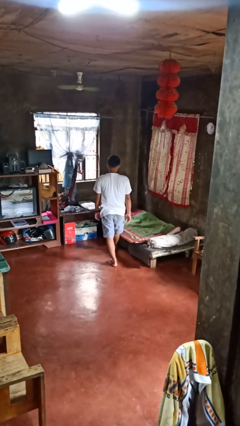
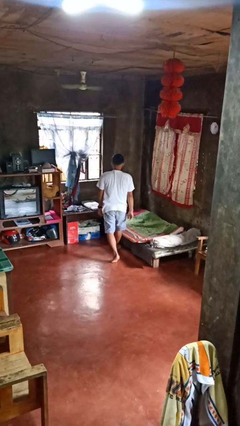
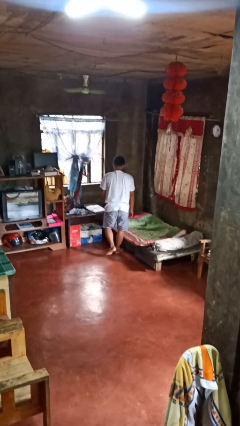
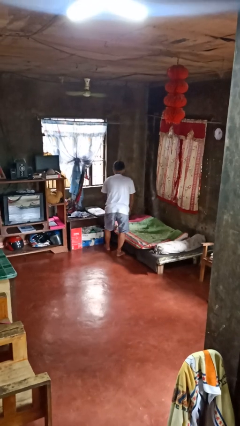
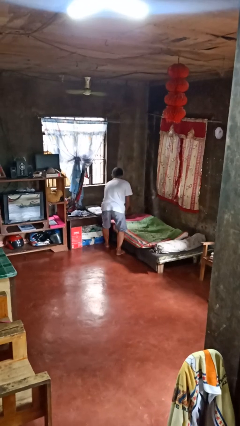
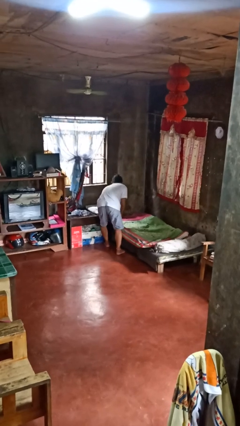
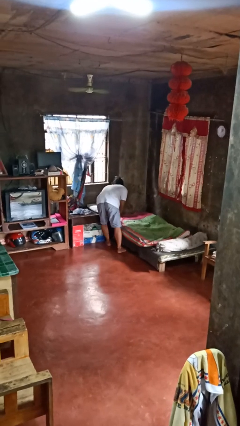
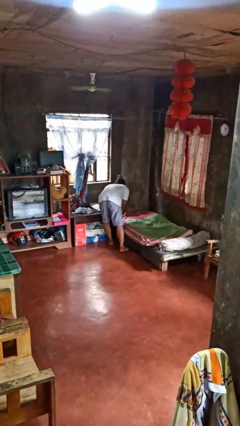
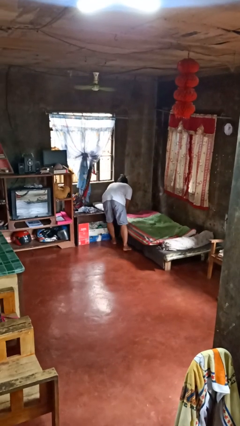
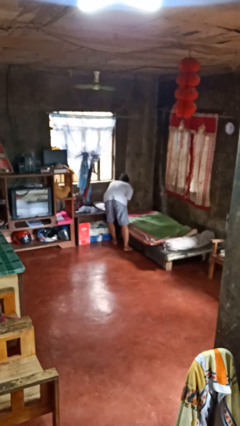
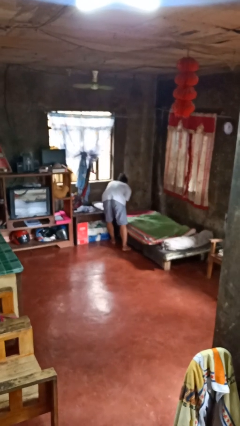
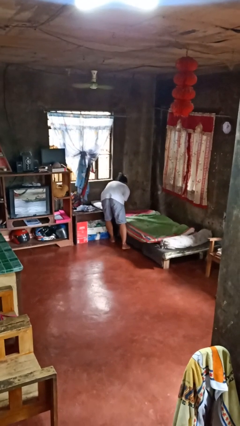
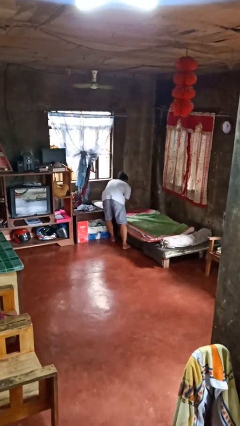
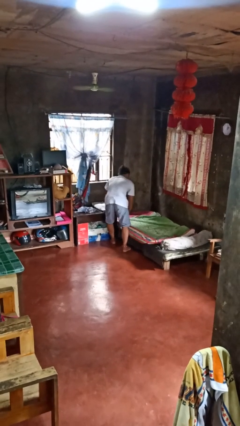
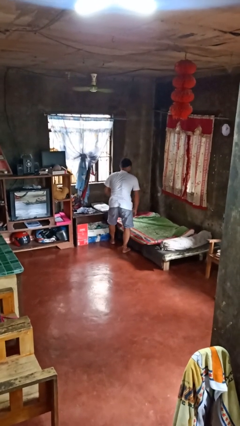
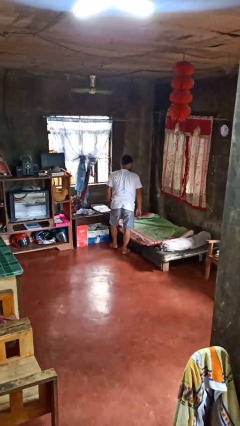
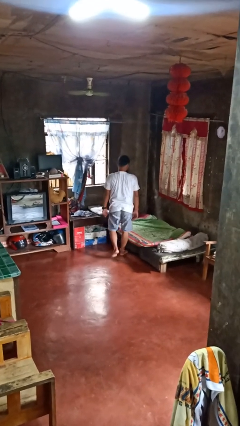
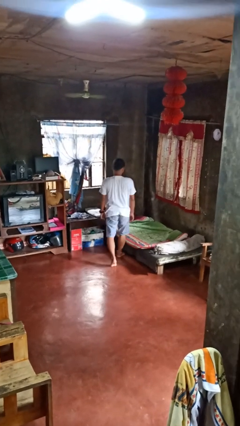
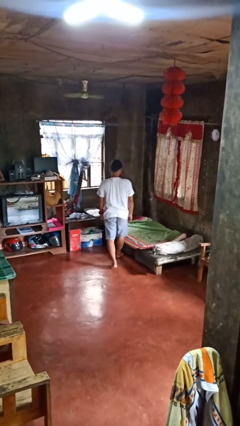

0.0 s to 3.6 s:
person makes bed

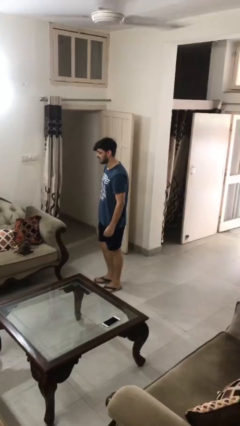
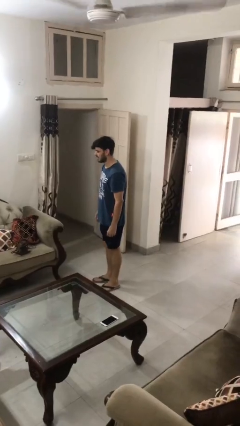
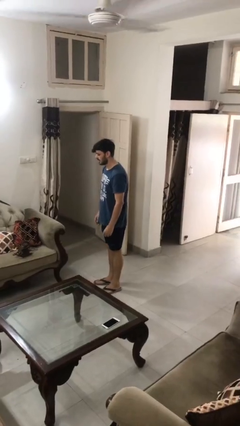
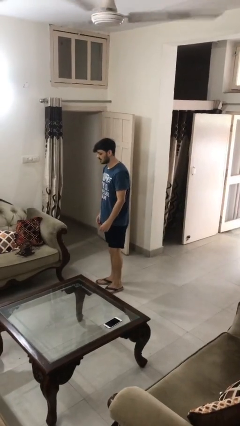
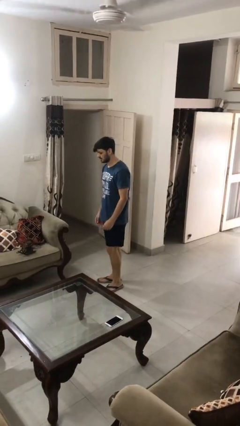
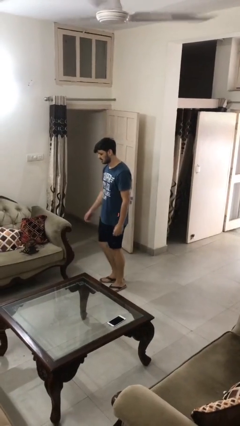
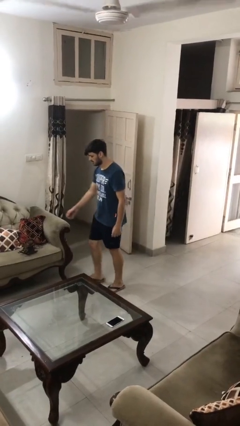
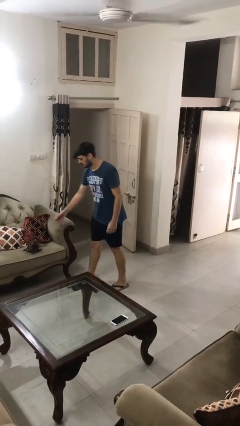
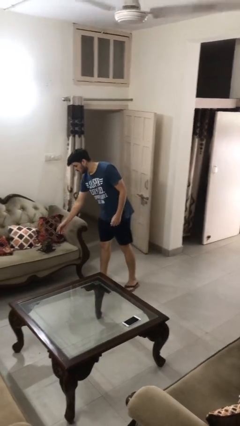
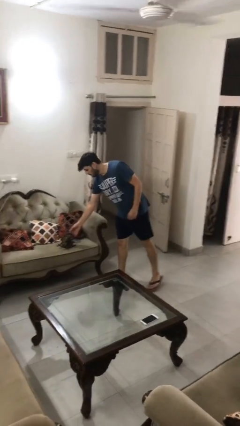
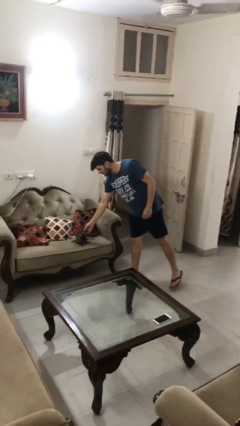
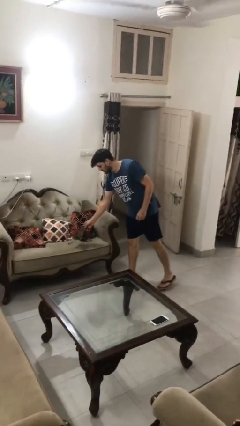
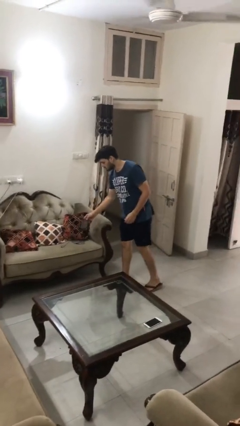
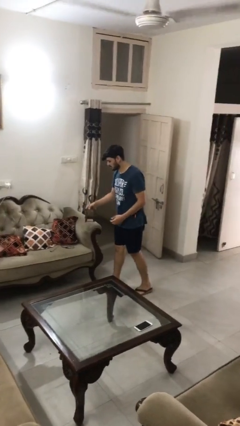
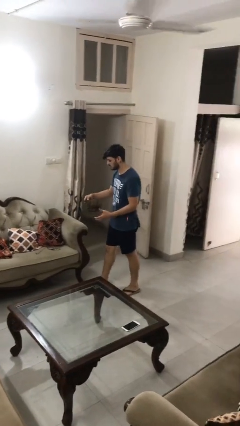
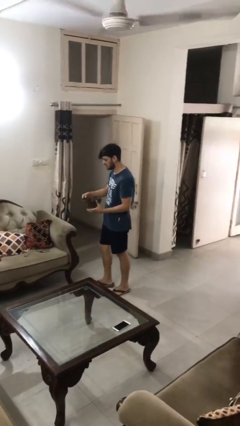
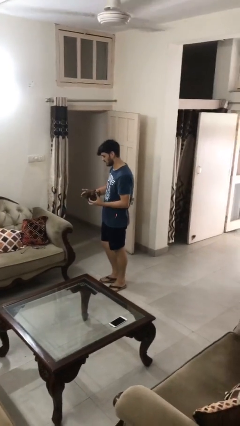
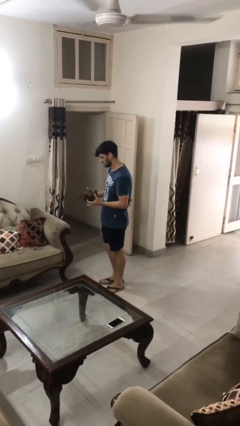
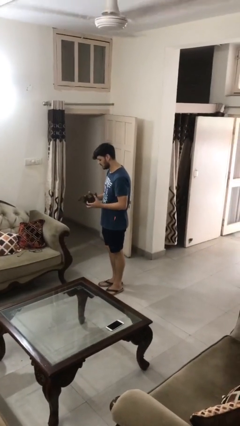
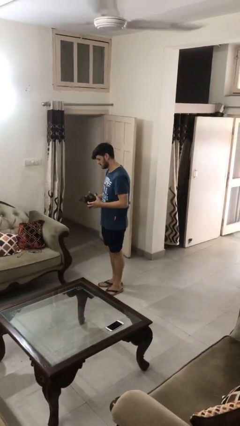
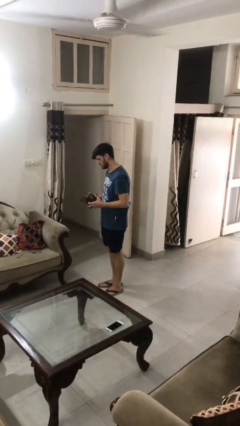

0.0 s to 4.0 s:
person picks up object from couch

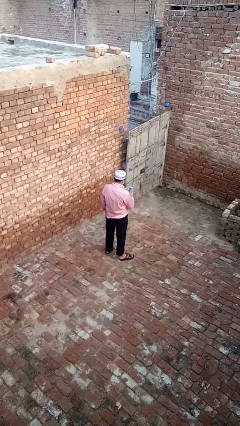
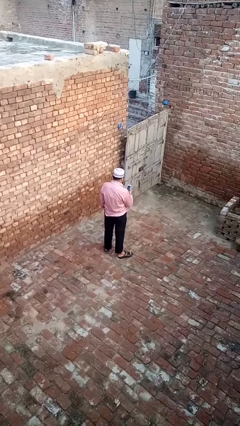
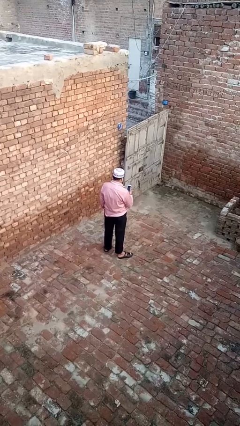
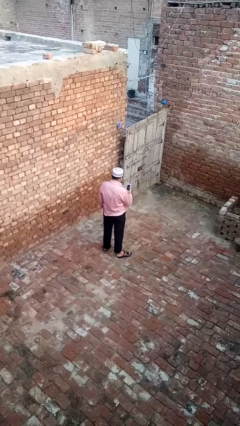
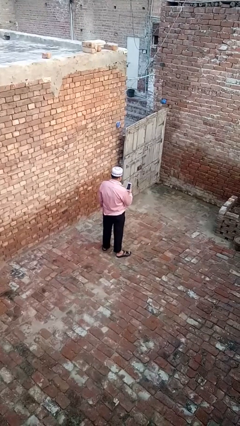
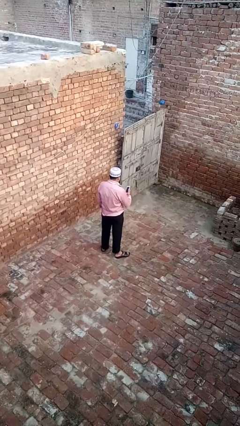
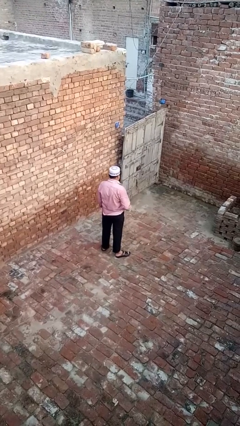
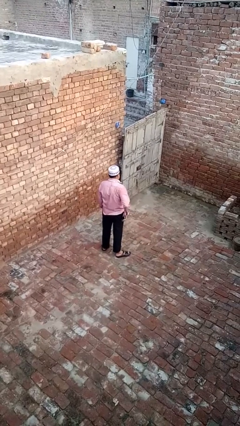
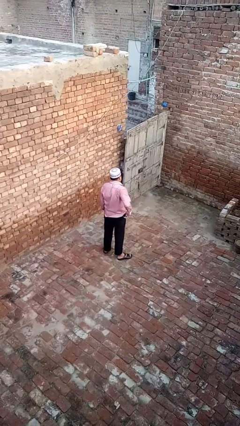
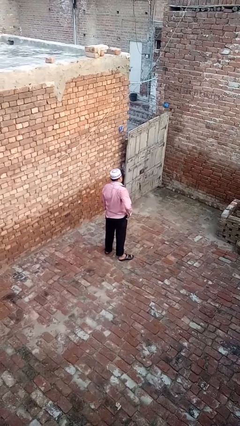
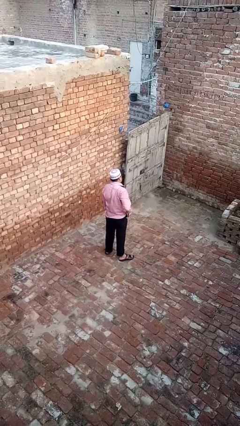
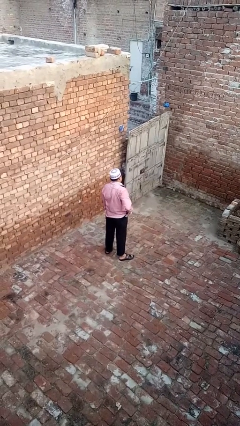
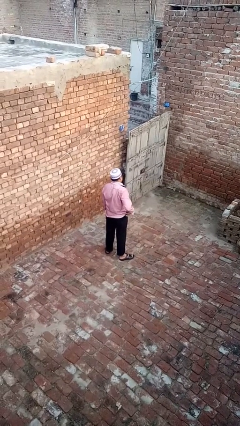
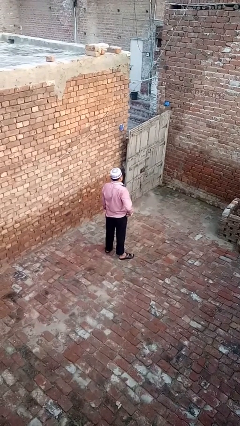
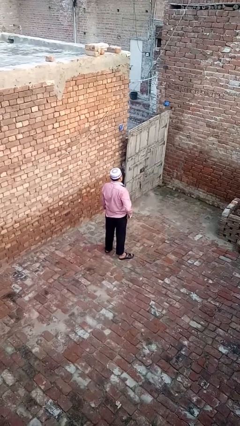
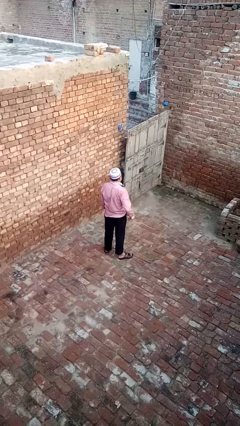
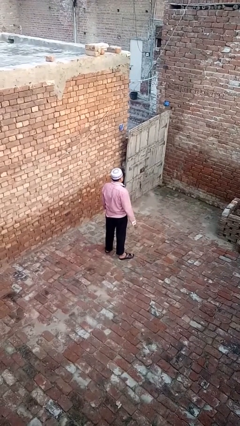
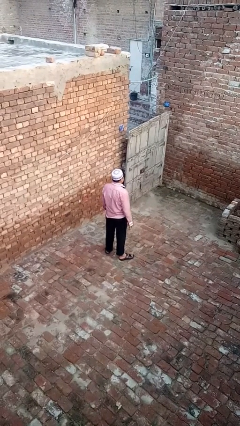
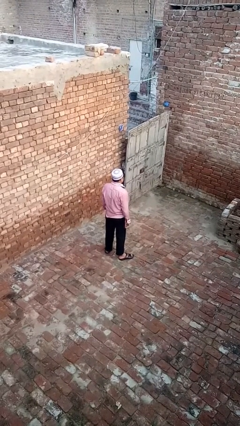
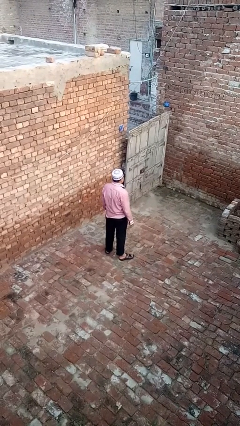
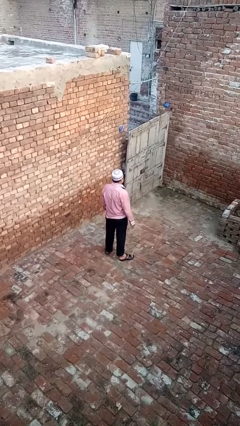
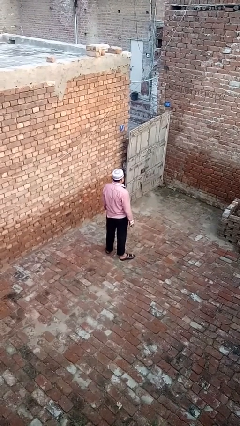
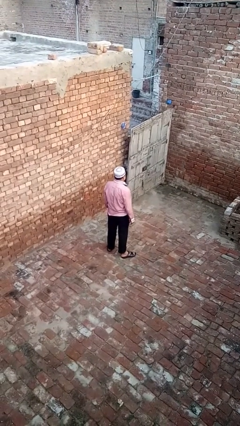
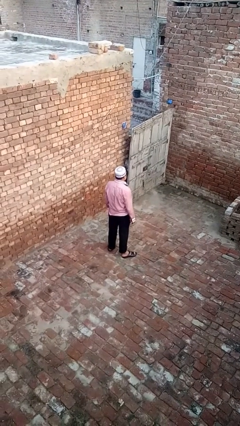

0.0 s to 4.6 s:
person puts phone into pocket

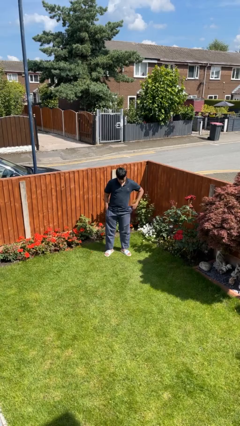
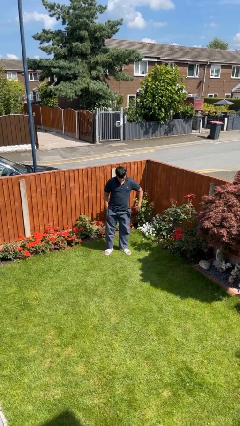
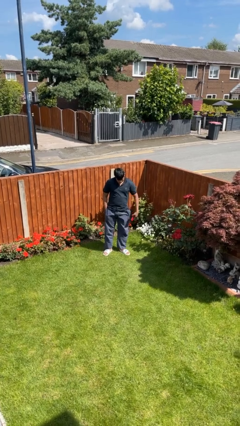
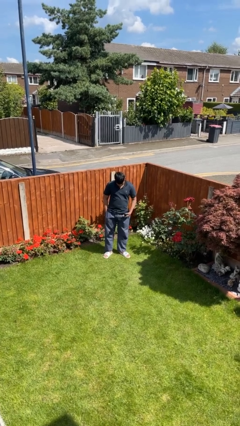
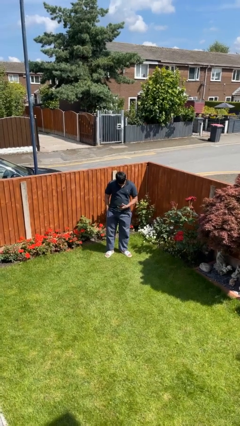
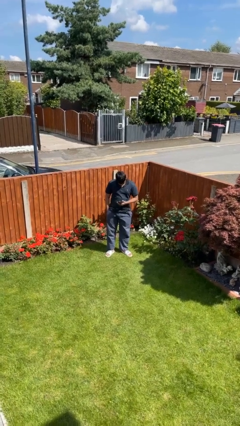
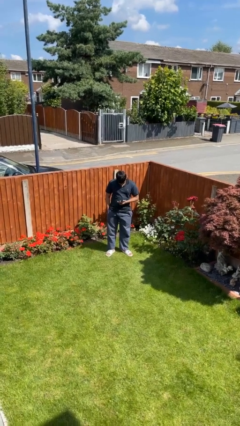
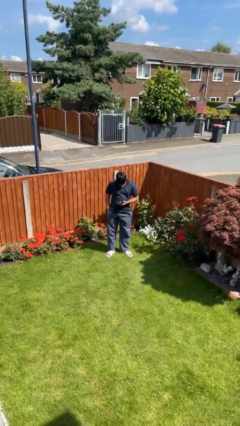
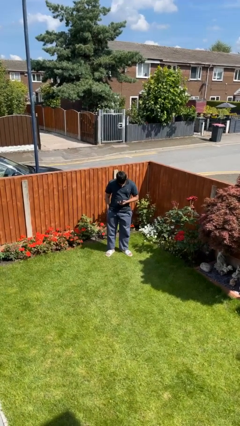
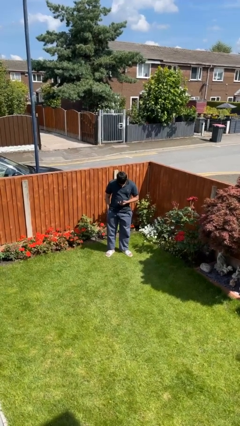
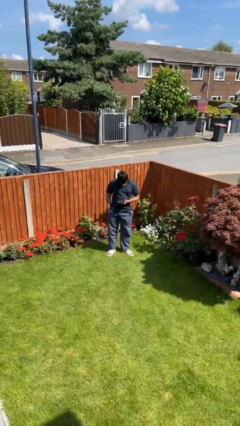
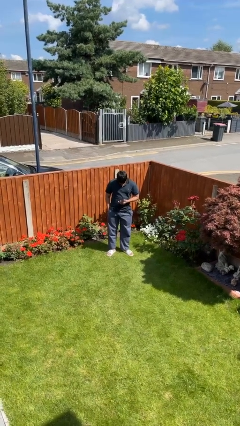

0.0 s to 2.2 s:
person takes phone from pocket

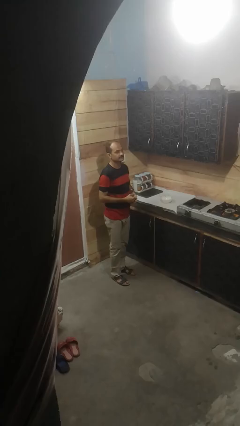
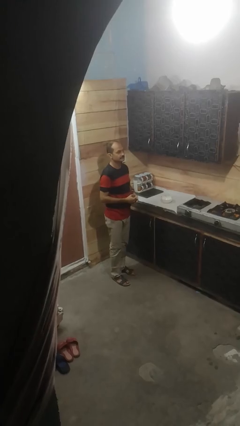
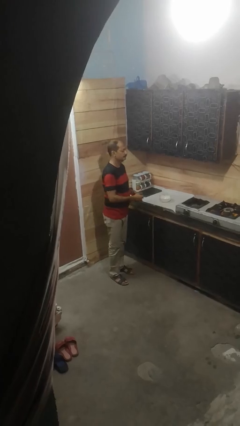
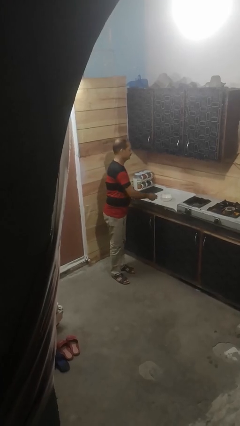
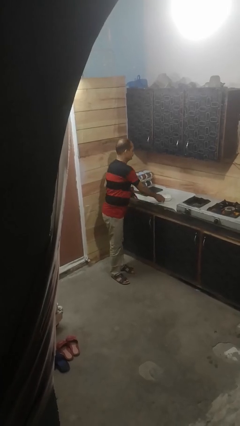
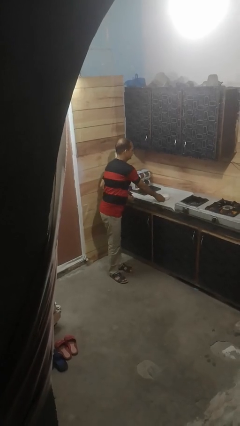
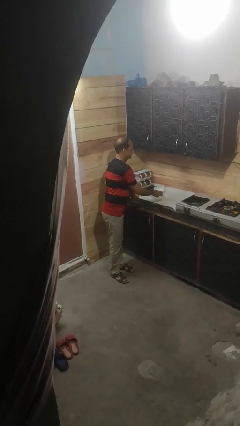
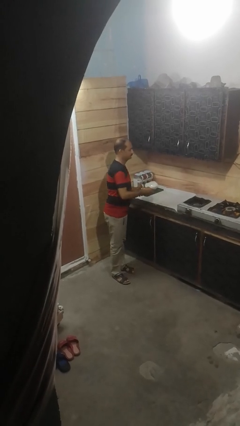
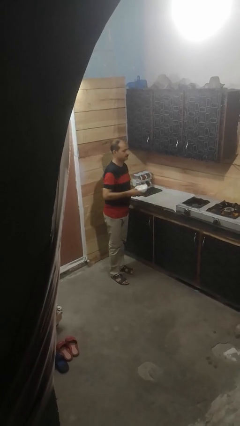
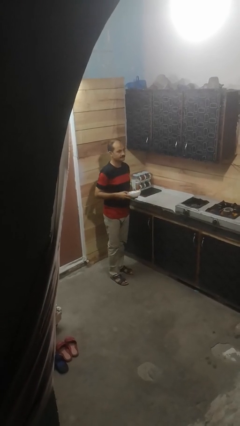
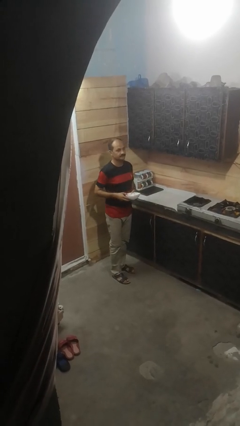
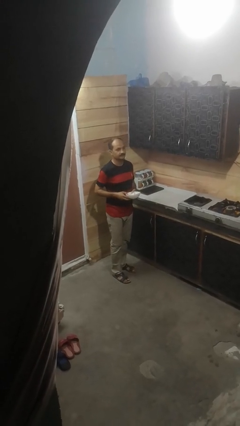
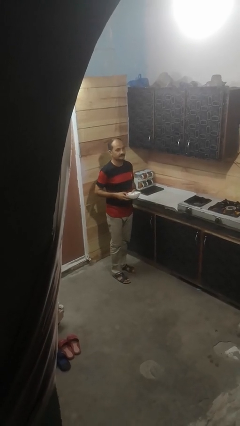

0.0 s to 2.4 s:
person picks up object from countertop

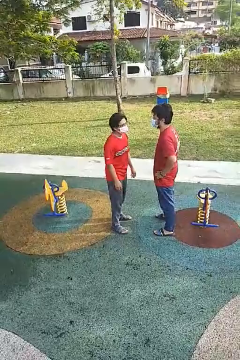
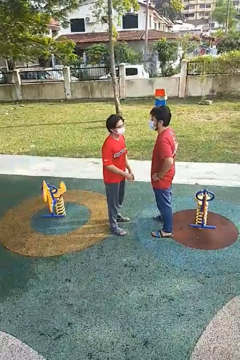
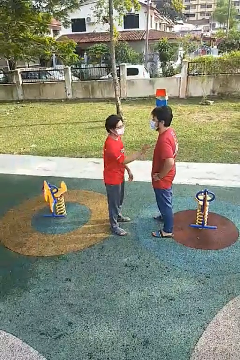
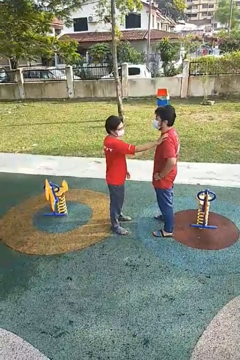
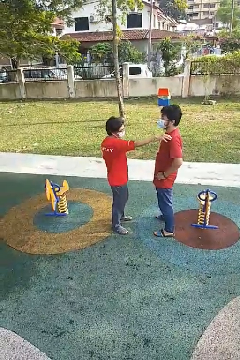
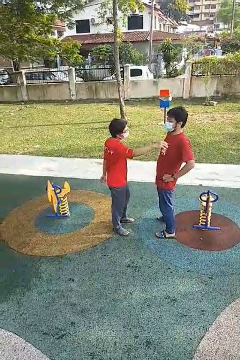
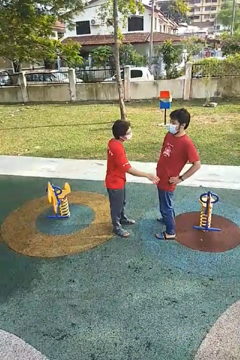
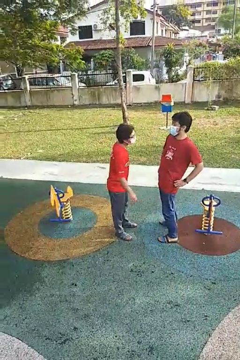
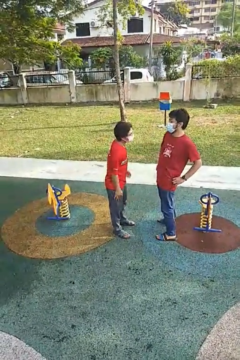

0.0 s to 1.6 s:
person shoves person
